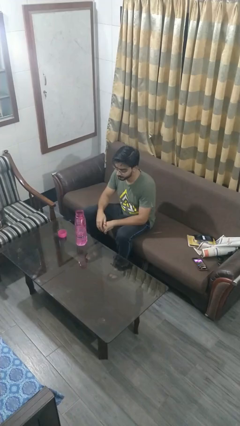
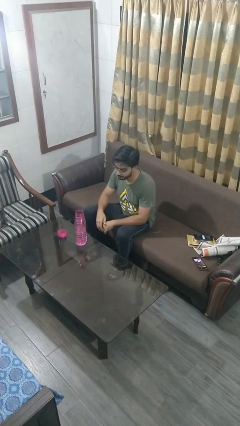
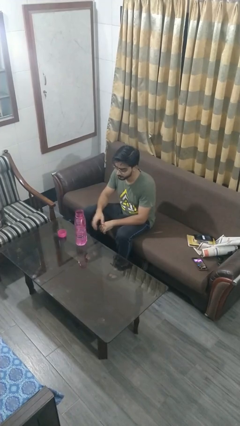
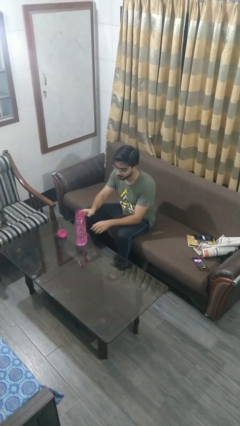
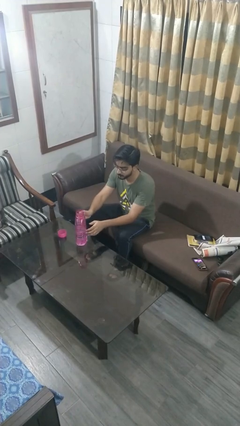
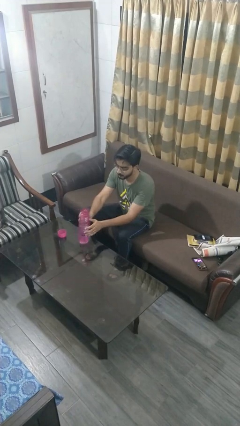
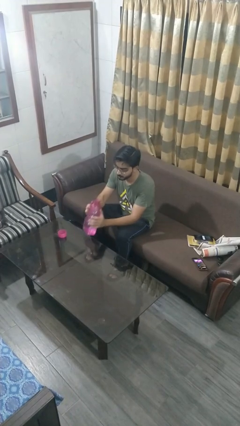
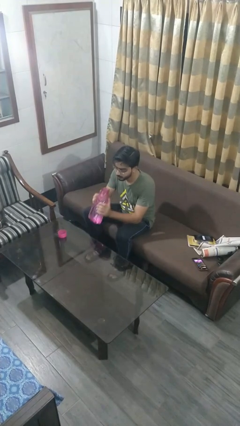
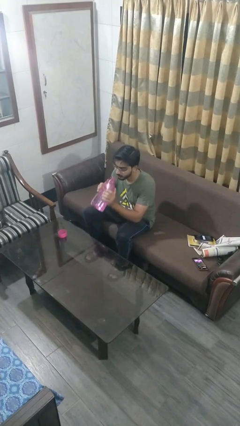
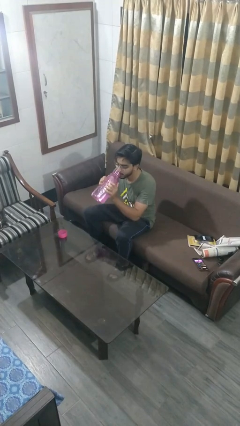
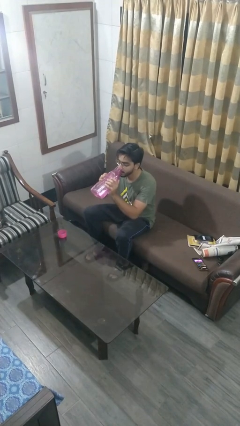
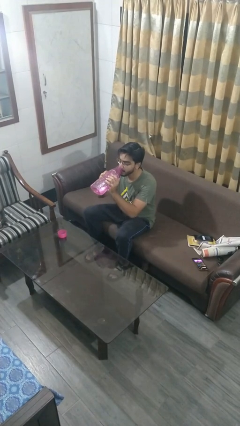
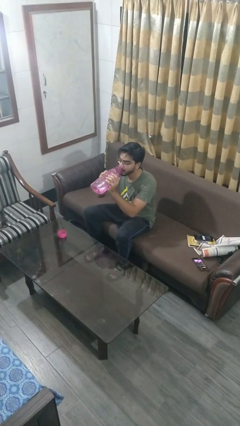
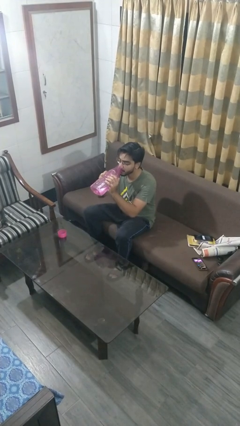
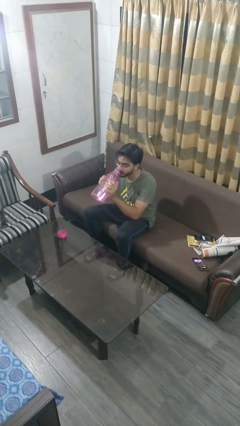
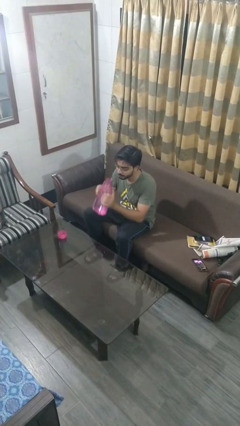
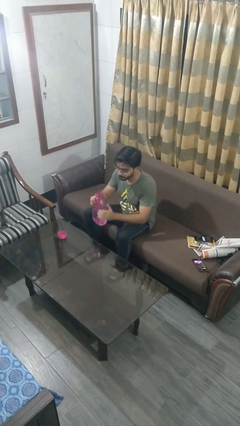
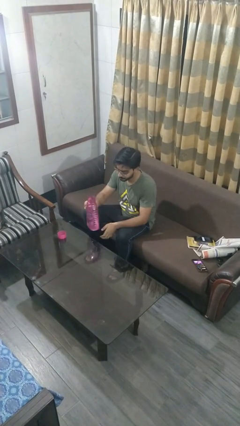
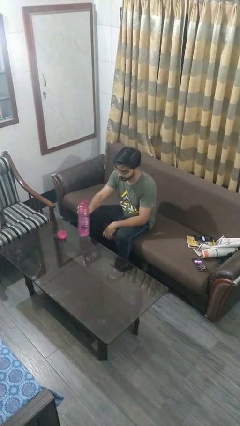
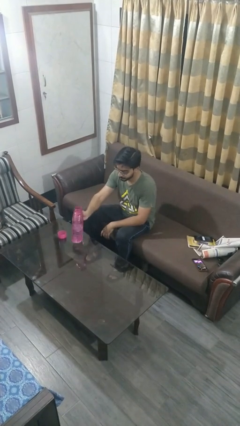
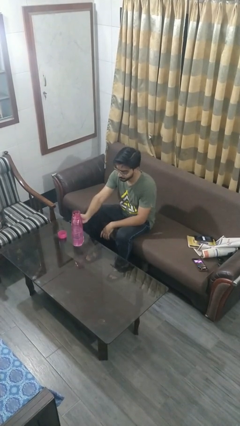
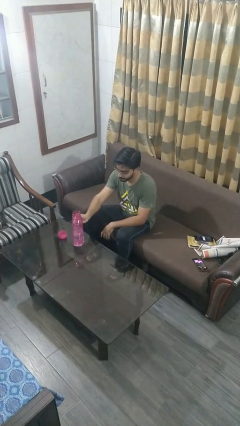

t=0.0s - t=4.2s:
person drinks from bottle

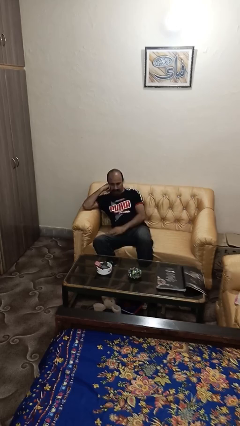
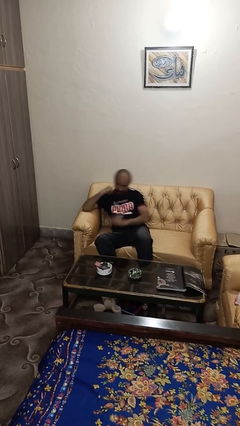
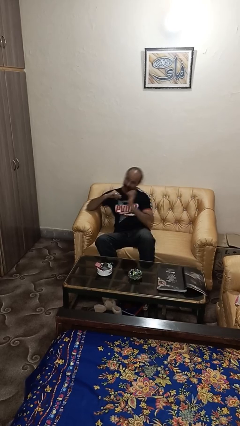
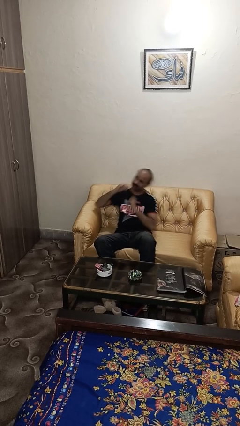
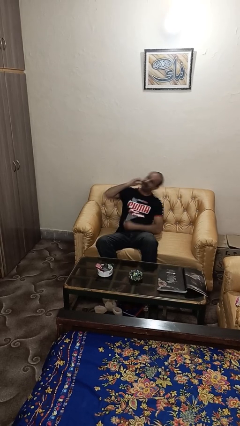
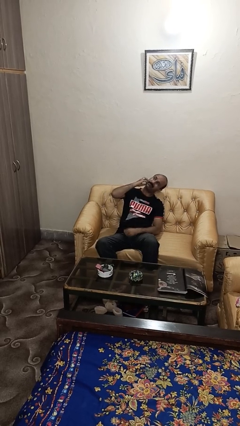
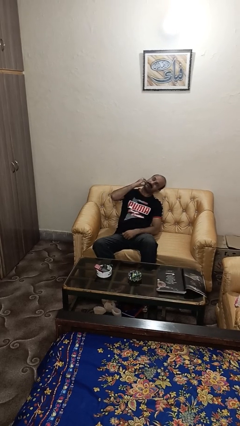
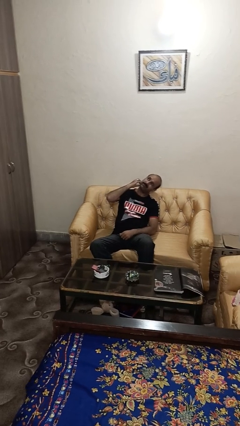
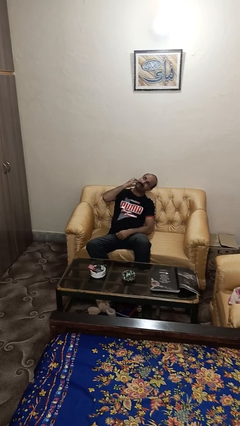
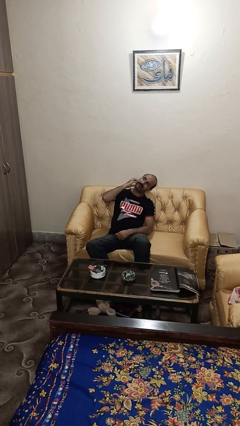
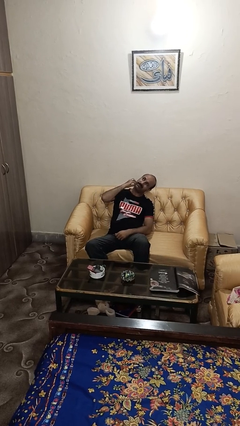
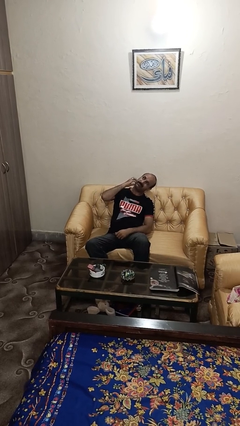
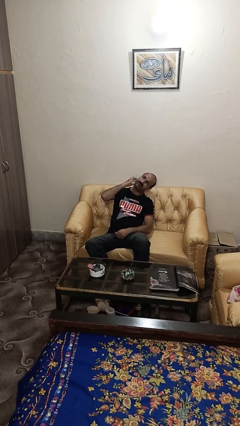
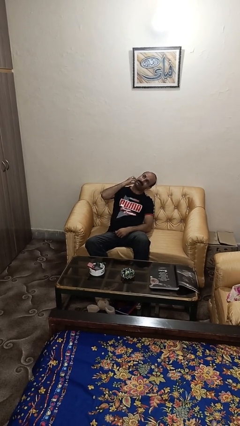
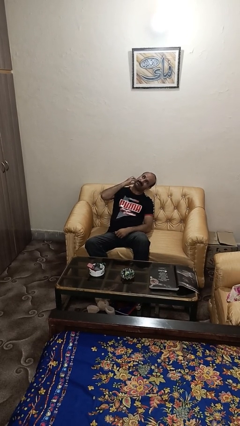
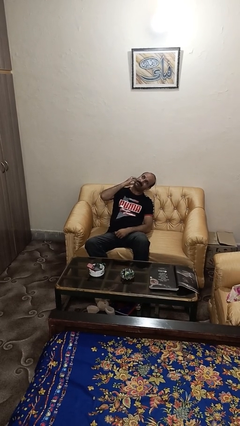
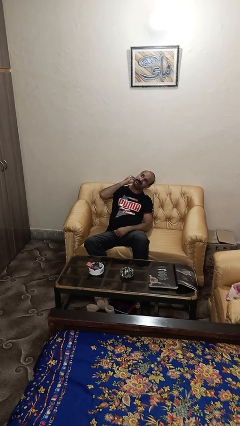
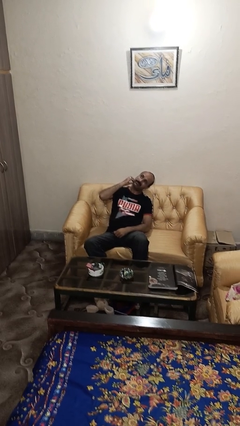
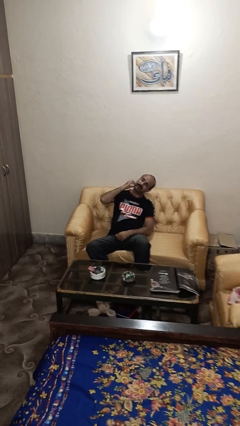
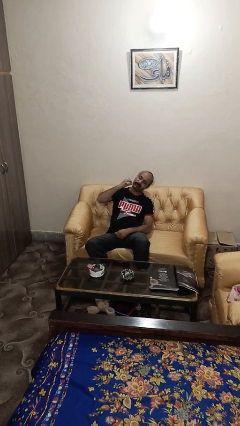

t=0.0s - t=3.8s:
person strokes chin

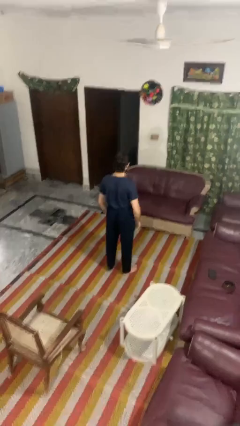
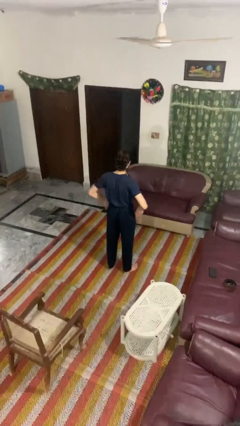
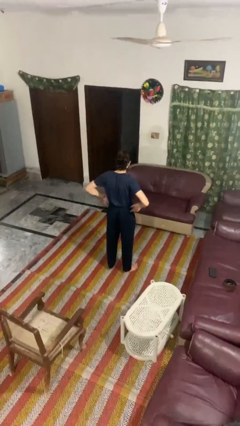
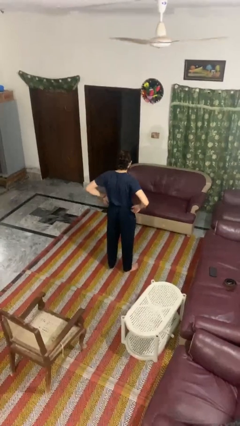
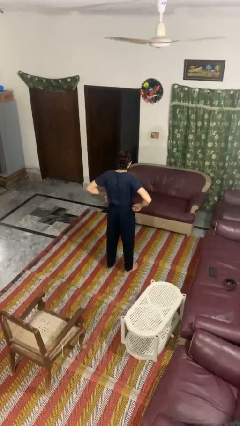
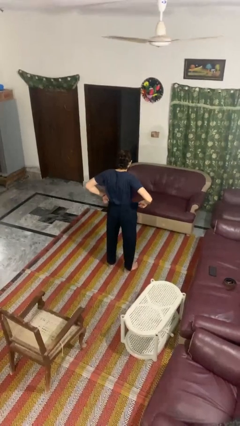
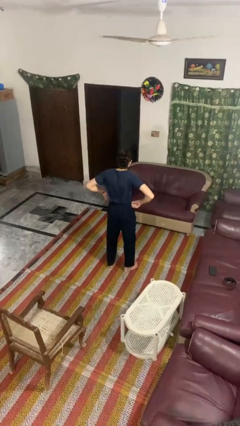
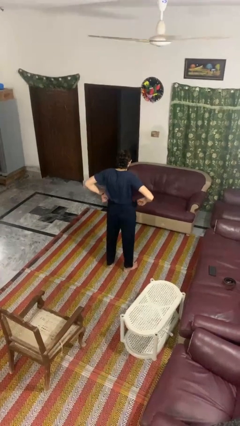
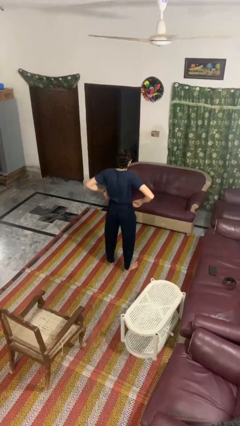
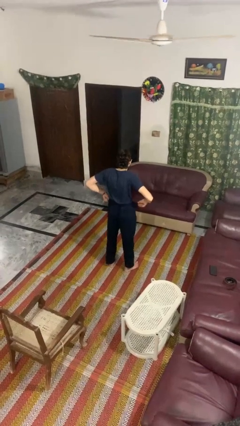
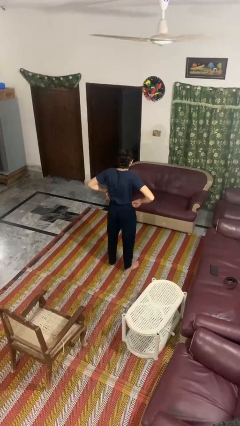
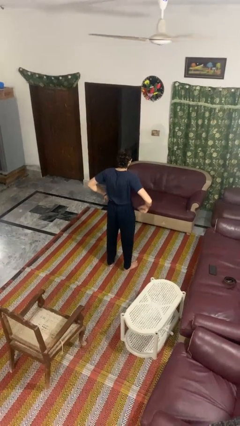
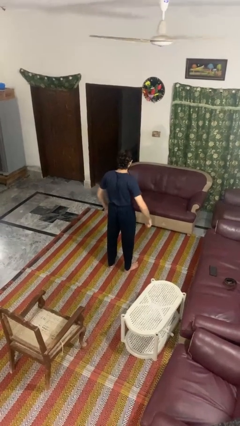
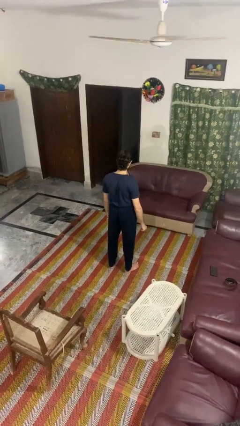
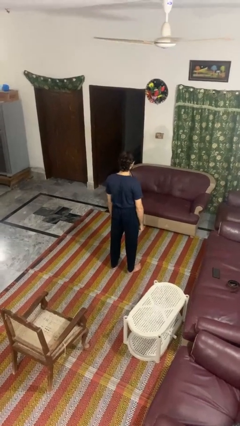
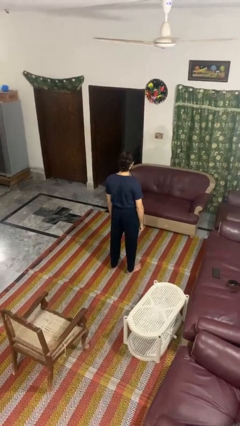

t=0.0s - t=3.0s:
person hikes up pants

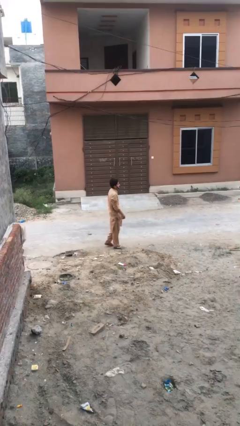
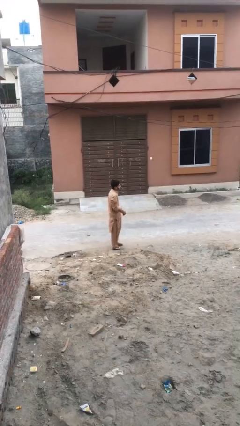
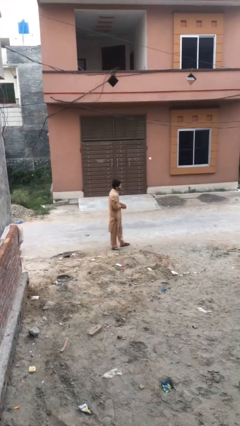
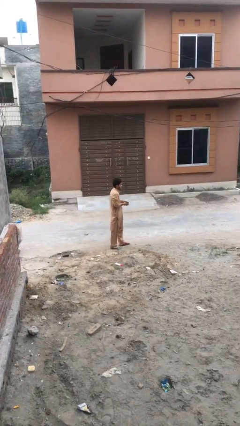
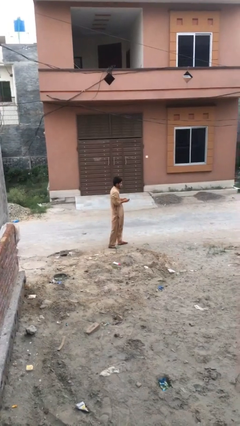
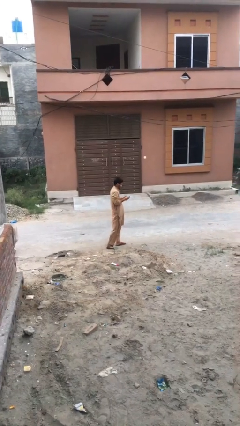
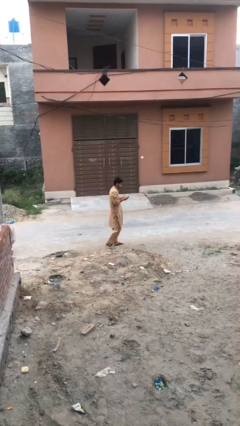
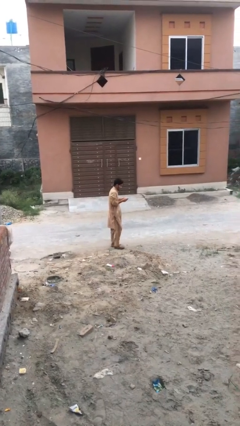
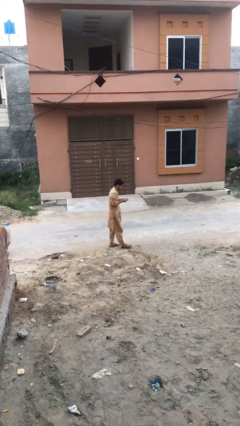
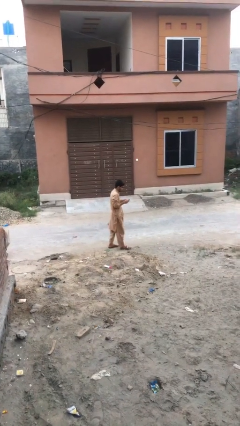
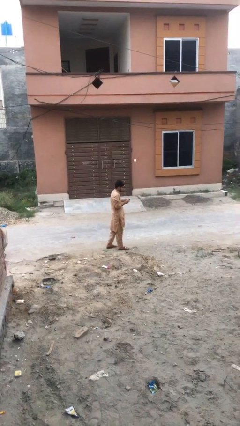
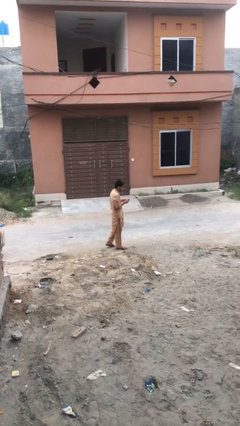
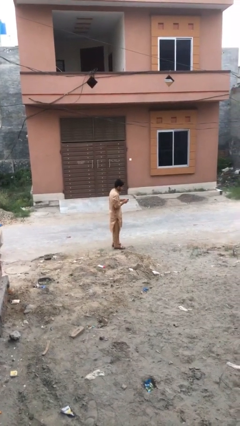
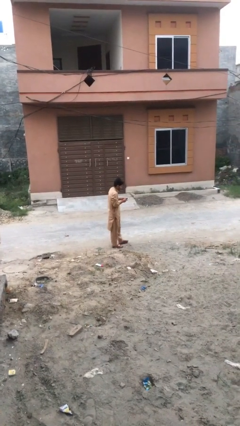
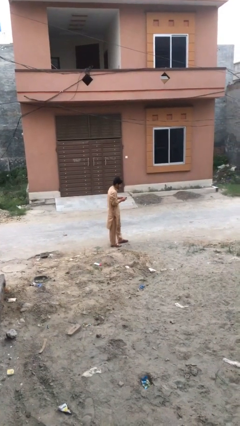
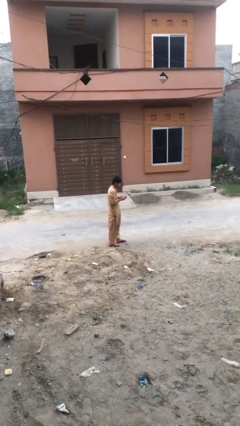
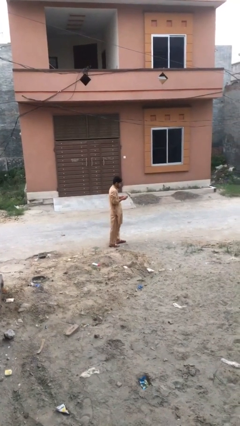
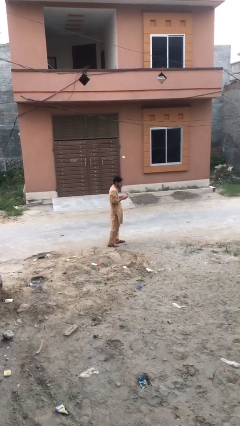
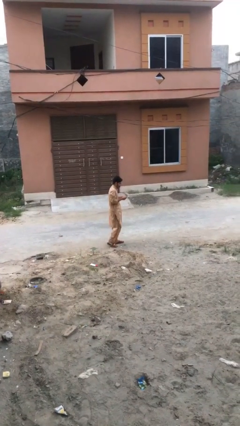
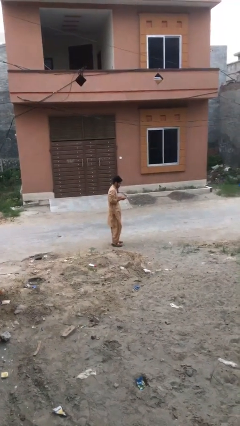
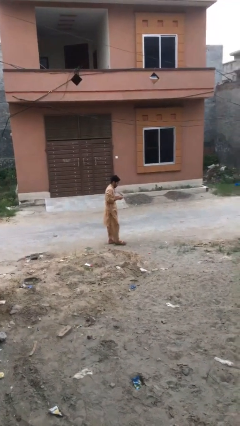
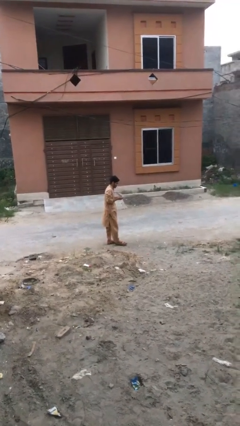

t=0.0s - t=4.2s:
person texts on phone

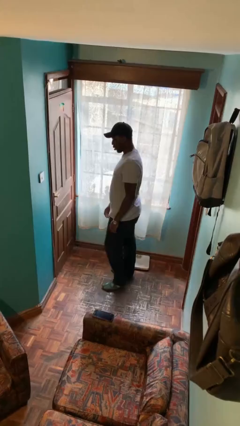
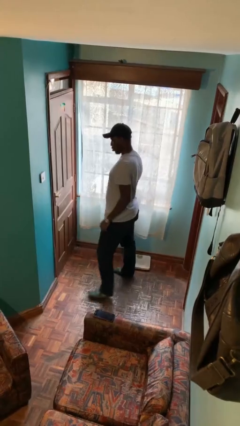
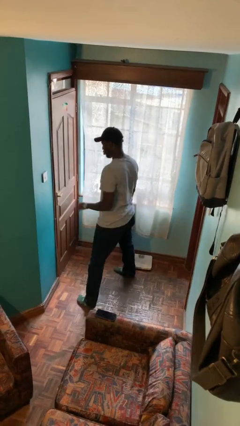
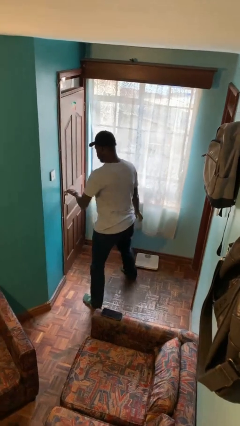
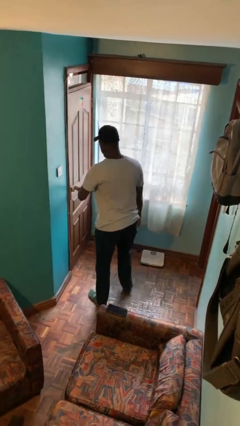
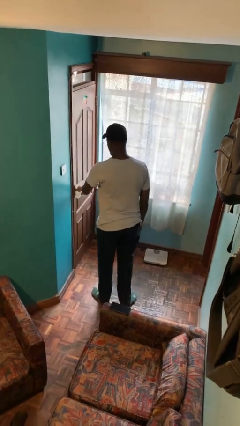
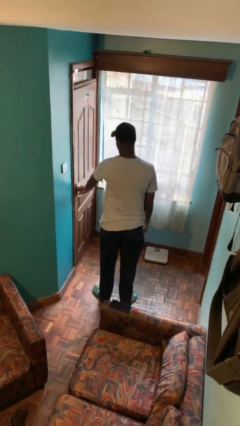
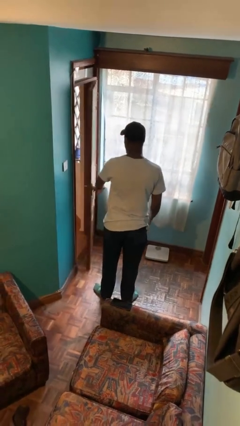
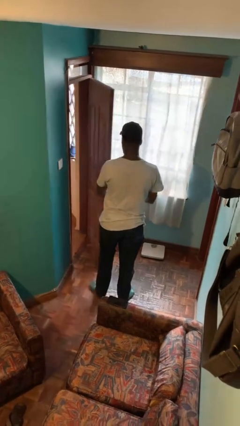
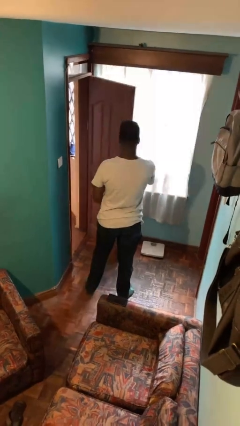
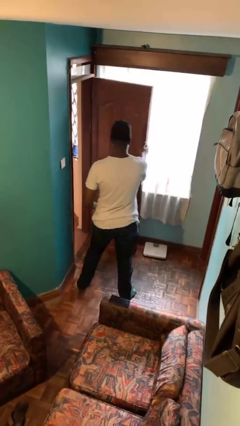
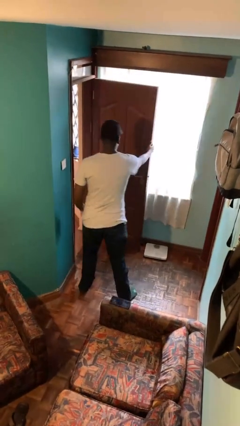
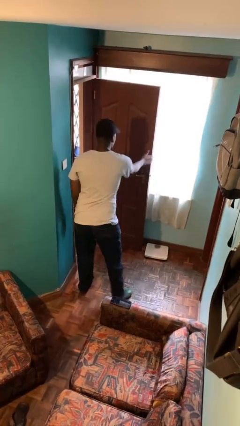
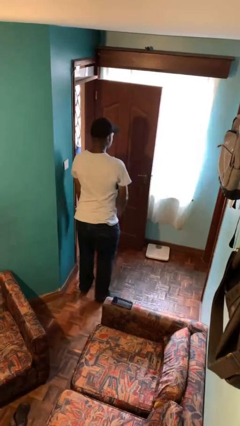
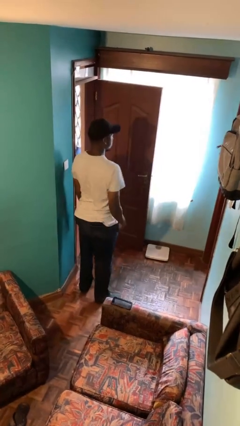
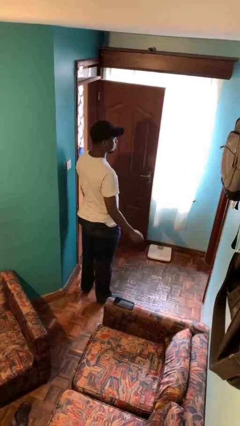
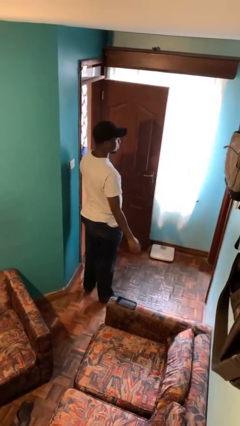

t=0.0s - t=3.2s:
person opens facility door
